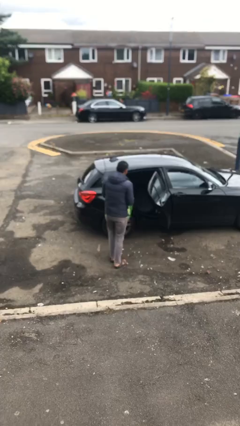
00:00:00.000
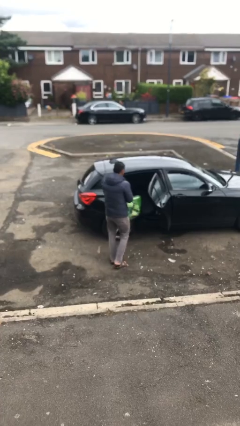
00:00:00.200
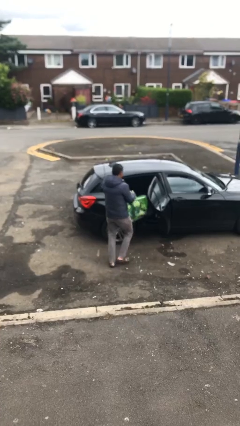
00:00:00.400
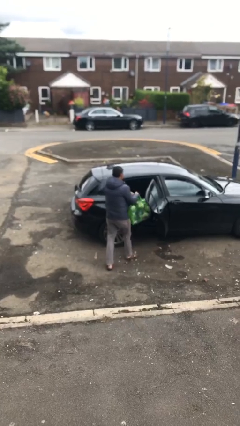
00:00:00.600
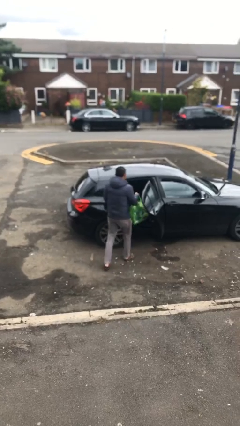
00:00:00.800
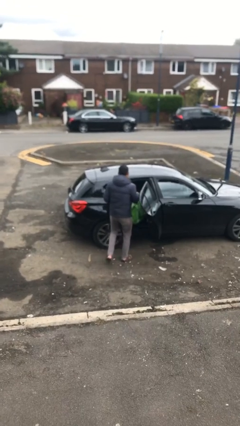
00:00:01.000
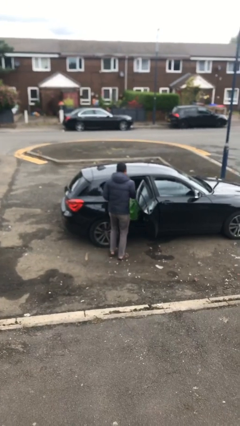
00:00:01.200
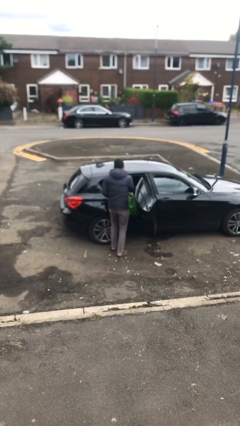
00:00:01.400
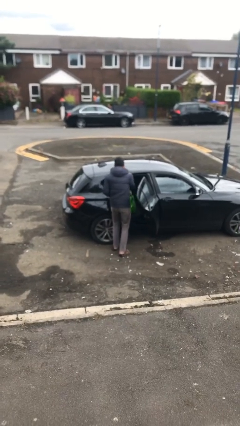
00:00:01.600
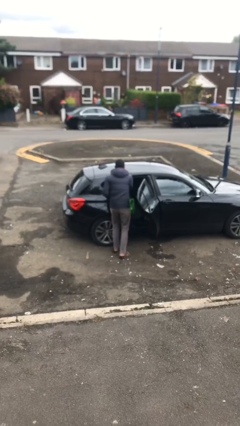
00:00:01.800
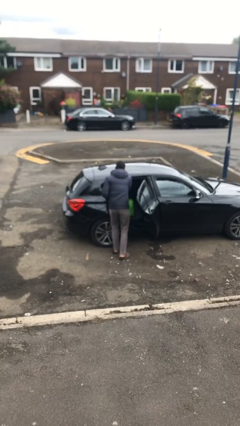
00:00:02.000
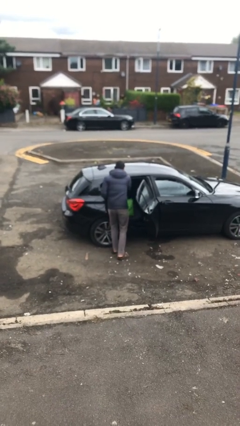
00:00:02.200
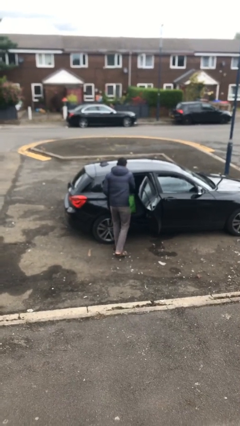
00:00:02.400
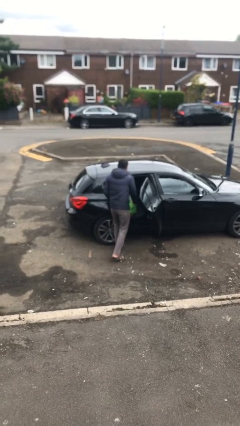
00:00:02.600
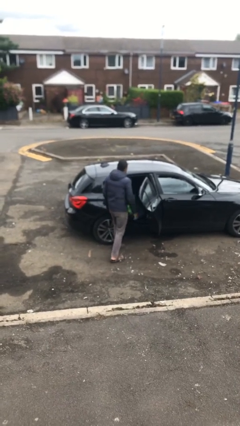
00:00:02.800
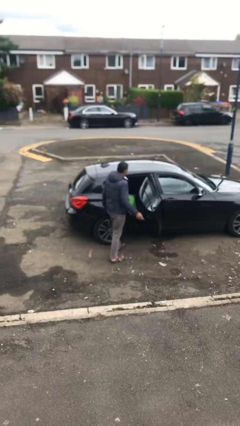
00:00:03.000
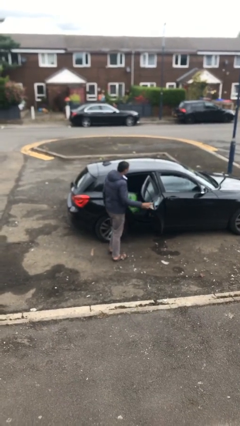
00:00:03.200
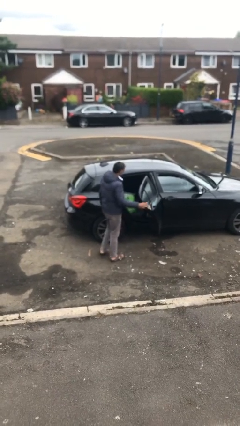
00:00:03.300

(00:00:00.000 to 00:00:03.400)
person loads car

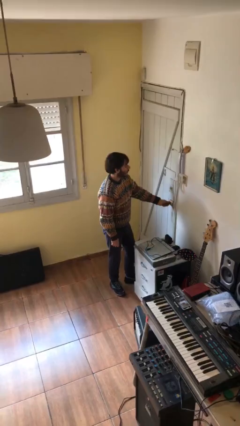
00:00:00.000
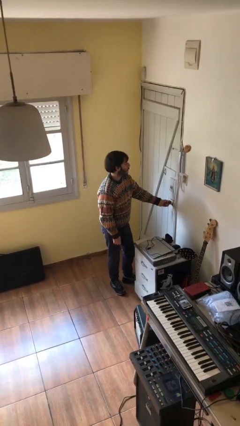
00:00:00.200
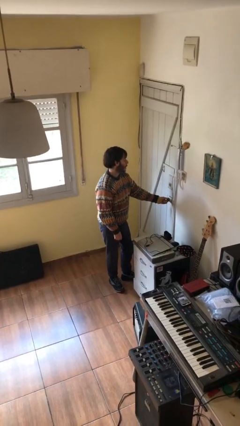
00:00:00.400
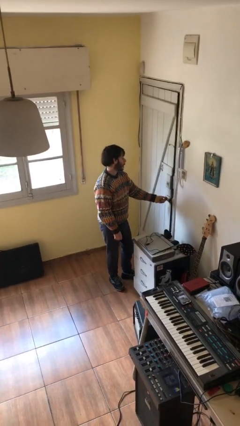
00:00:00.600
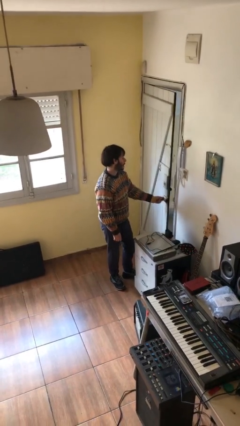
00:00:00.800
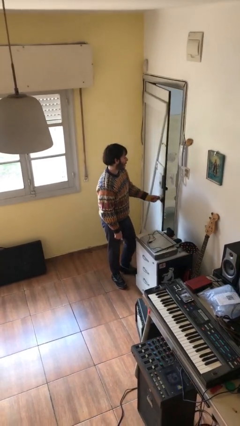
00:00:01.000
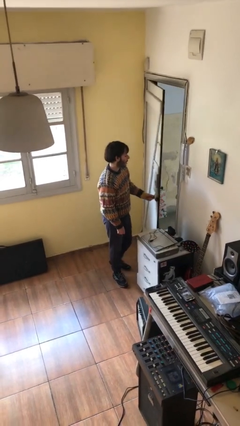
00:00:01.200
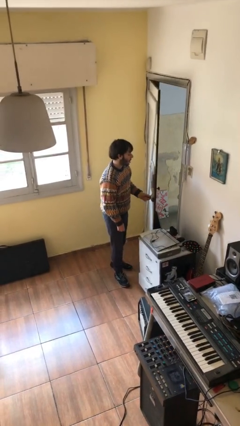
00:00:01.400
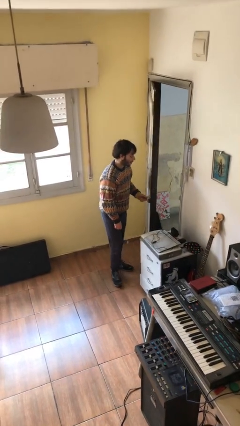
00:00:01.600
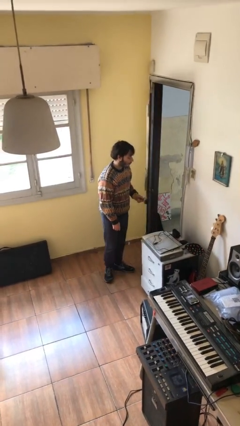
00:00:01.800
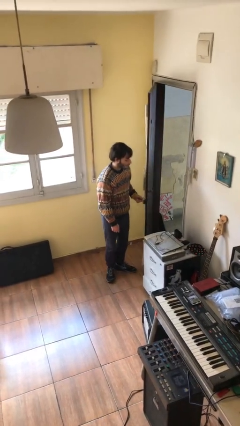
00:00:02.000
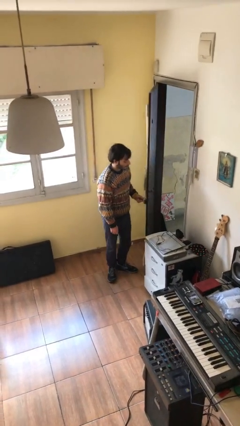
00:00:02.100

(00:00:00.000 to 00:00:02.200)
person opens facility door

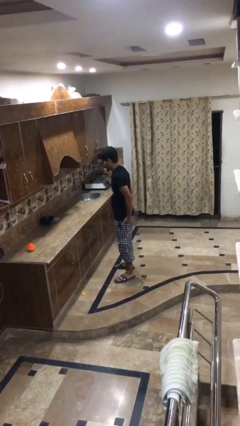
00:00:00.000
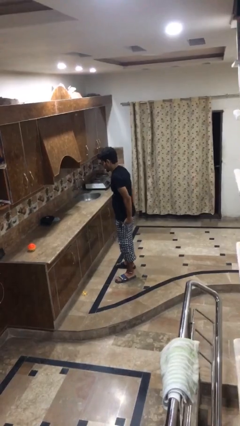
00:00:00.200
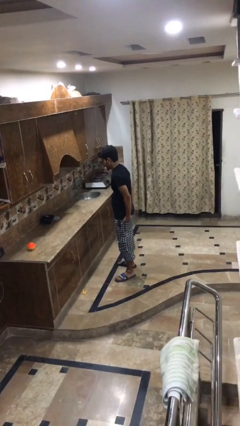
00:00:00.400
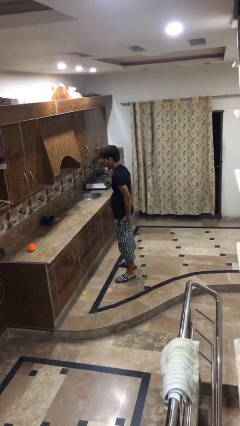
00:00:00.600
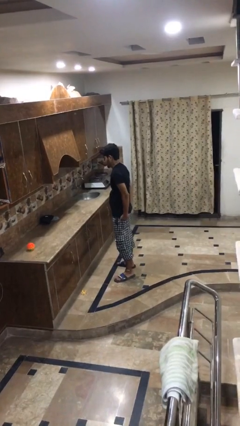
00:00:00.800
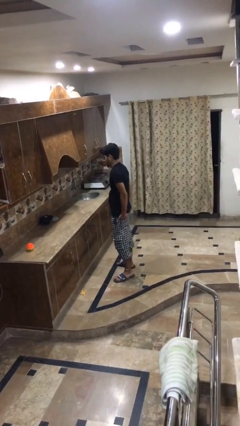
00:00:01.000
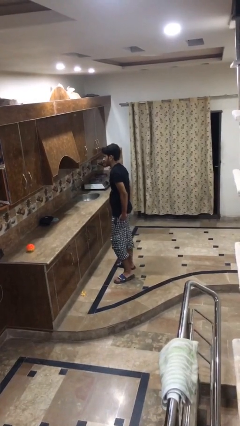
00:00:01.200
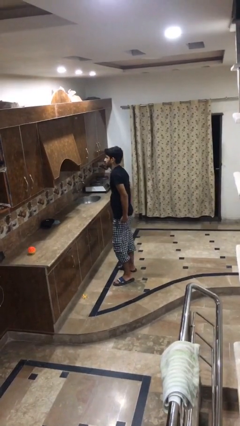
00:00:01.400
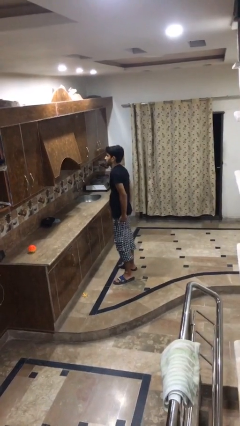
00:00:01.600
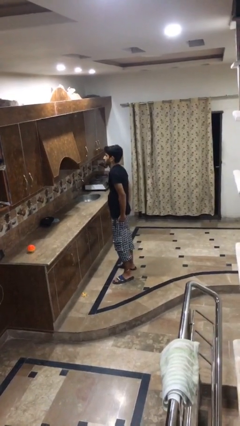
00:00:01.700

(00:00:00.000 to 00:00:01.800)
person puts hands in back pockets

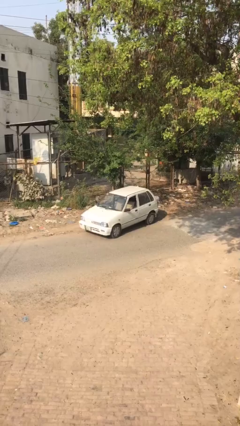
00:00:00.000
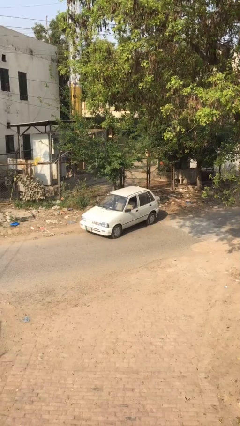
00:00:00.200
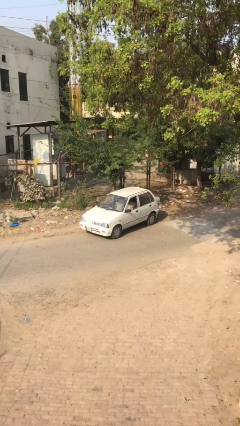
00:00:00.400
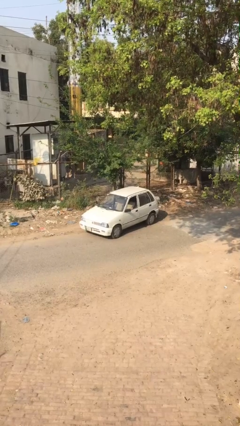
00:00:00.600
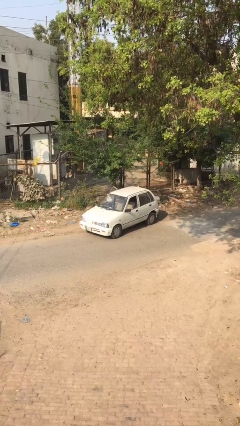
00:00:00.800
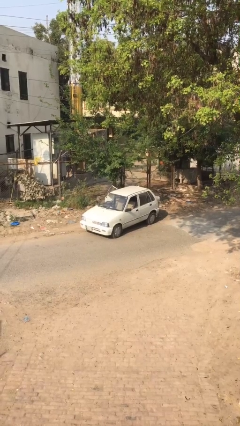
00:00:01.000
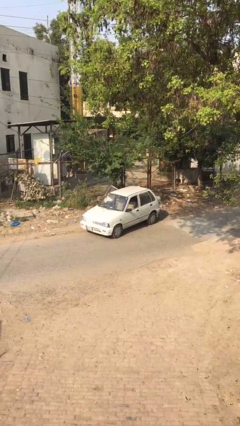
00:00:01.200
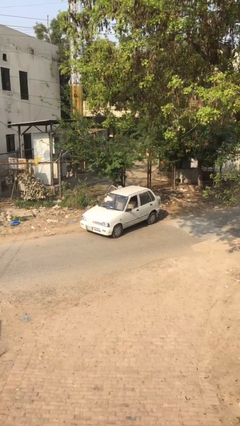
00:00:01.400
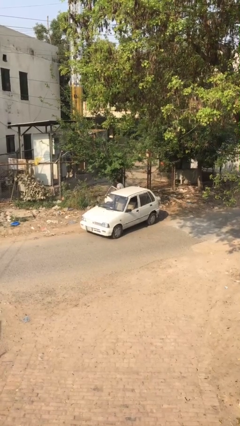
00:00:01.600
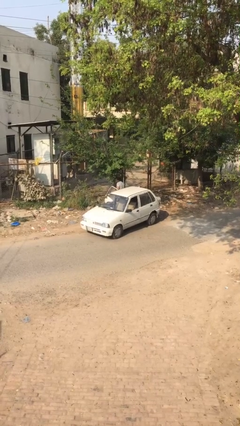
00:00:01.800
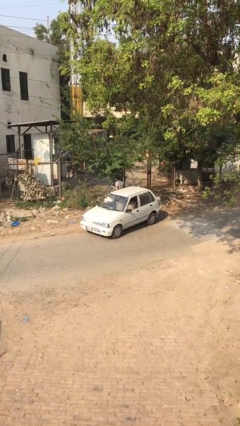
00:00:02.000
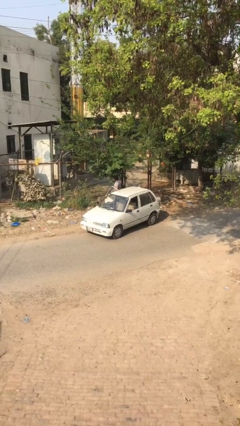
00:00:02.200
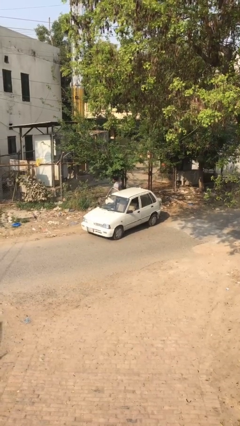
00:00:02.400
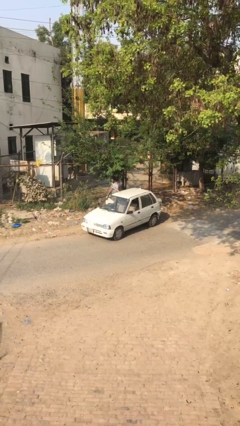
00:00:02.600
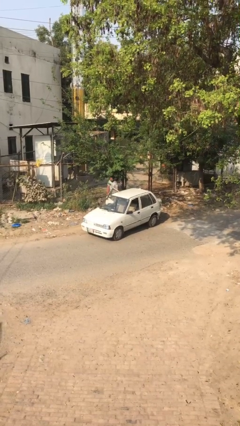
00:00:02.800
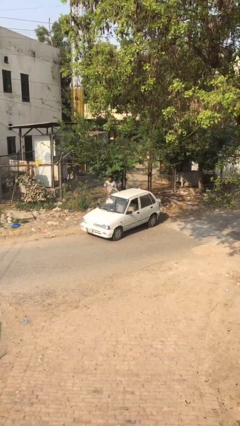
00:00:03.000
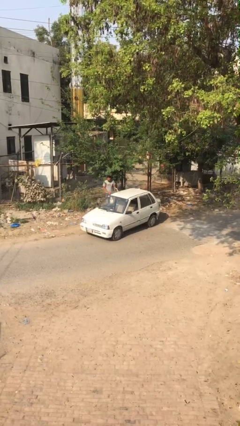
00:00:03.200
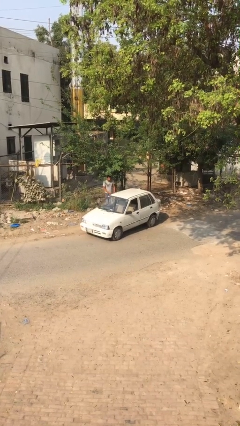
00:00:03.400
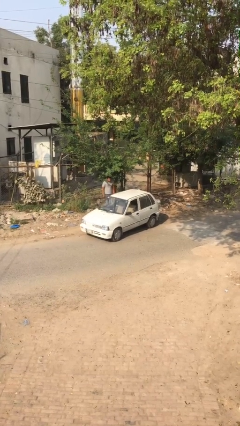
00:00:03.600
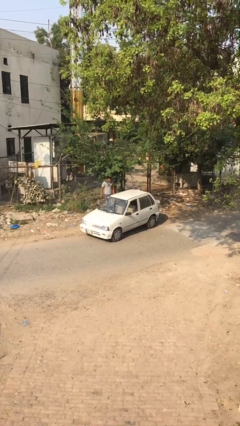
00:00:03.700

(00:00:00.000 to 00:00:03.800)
car drops off person

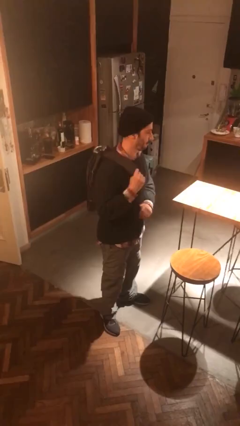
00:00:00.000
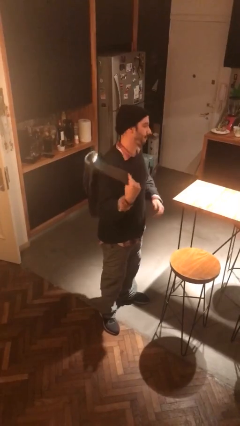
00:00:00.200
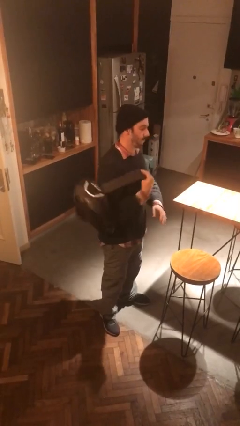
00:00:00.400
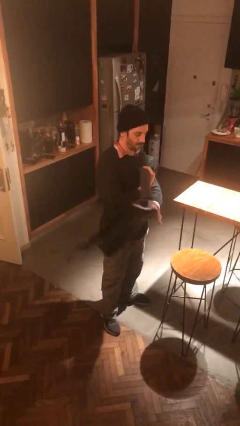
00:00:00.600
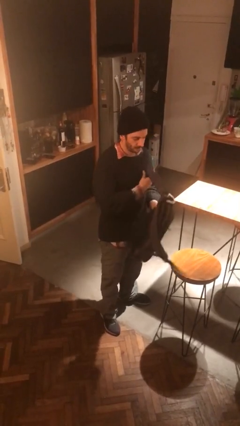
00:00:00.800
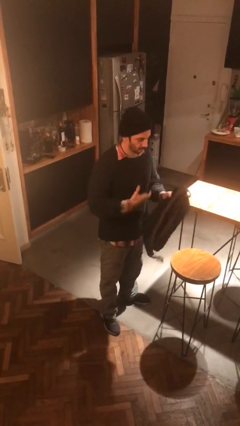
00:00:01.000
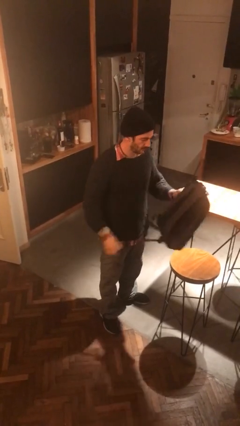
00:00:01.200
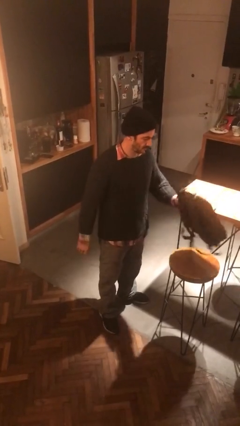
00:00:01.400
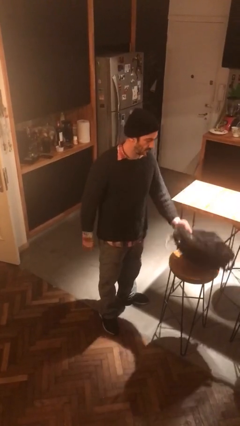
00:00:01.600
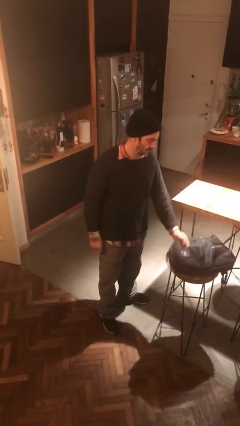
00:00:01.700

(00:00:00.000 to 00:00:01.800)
person takes off backpack

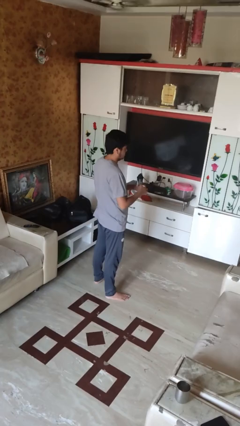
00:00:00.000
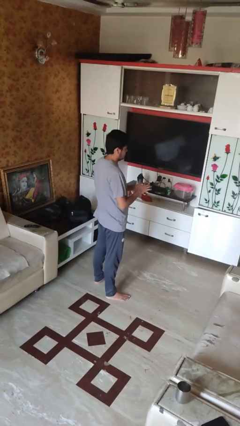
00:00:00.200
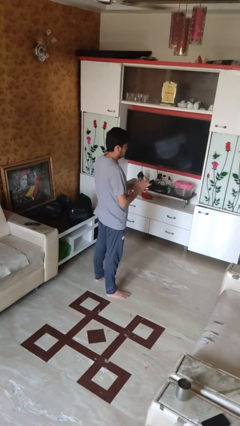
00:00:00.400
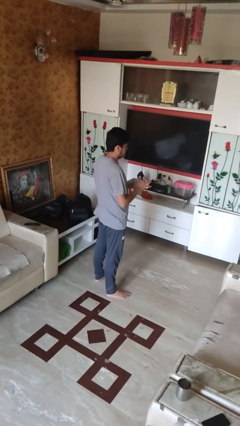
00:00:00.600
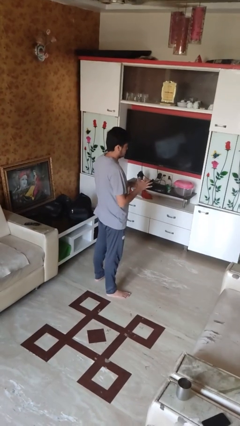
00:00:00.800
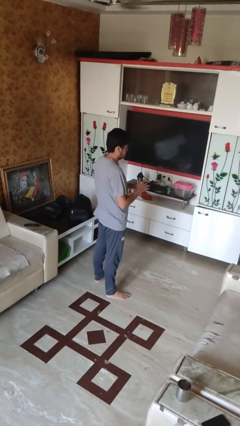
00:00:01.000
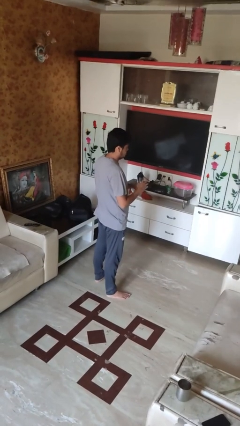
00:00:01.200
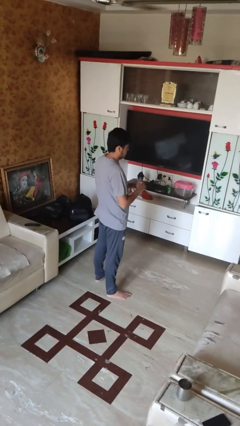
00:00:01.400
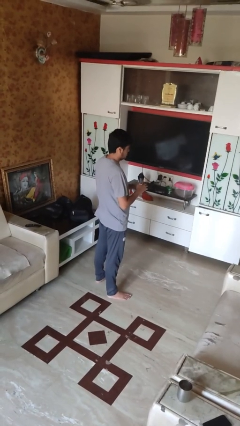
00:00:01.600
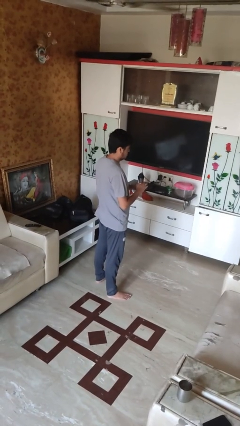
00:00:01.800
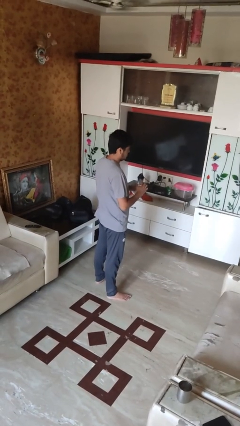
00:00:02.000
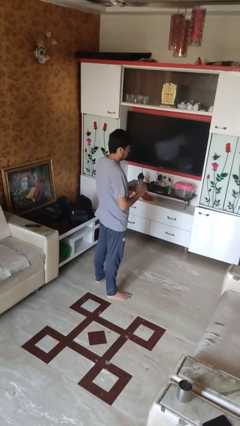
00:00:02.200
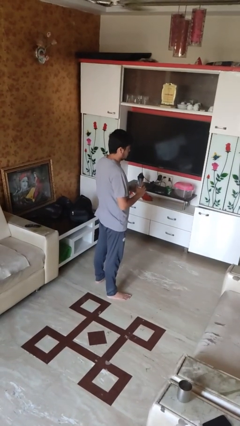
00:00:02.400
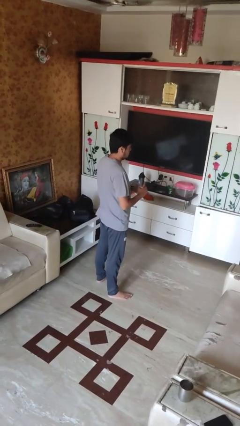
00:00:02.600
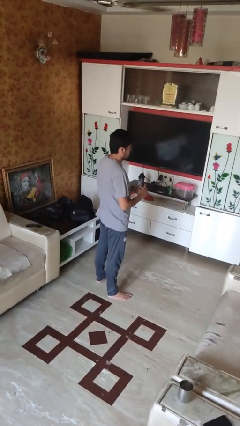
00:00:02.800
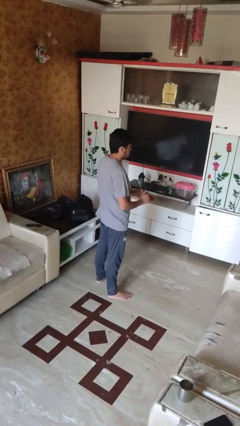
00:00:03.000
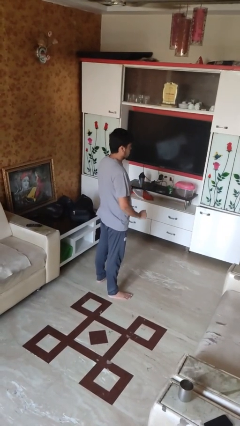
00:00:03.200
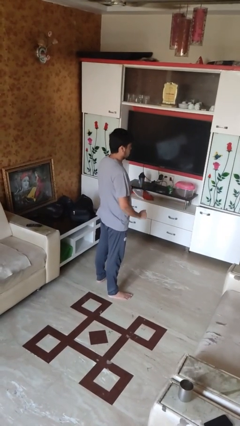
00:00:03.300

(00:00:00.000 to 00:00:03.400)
person cracks knuckles

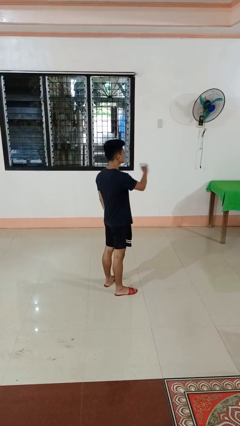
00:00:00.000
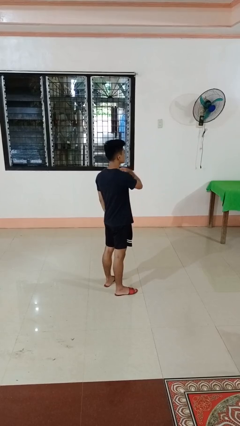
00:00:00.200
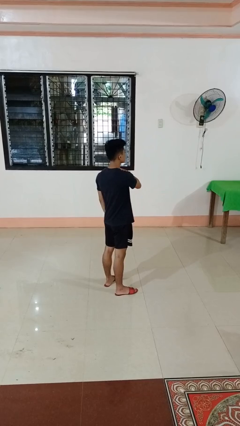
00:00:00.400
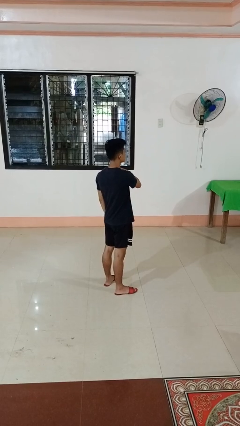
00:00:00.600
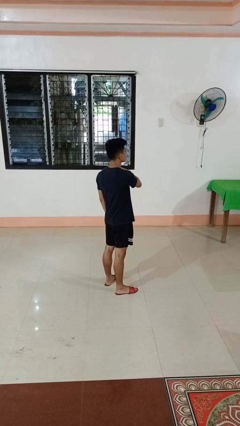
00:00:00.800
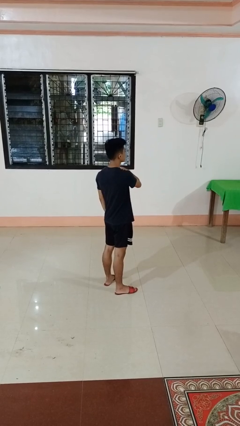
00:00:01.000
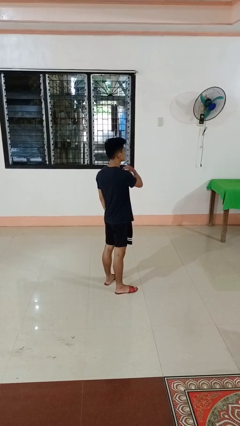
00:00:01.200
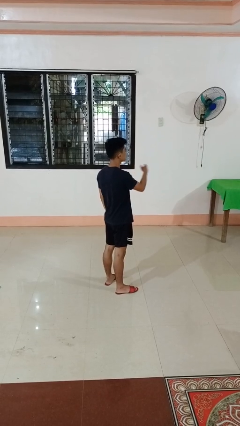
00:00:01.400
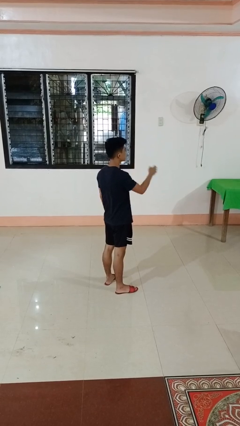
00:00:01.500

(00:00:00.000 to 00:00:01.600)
person gestures swipe left
